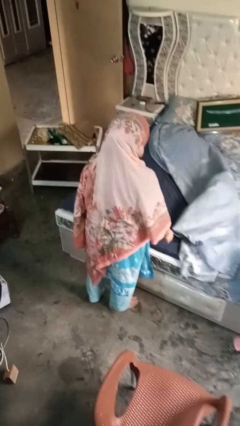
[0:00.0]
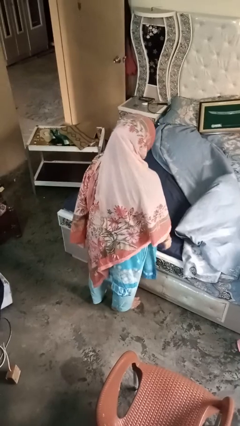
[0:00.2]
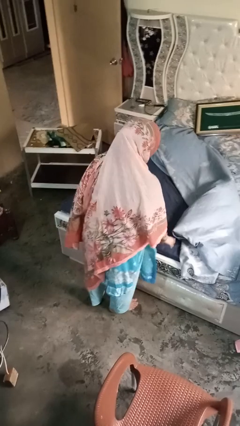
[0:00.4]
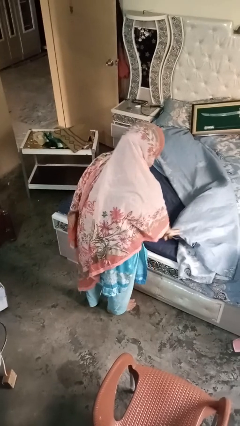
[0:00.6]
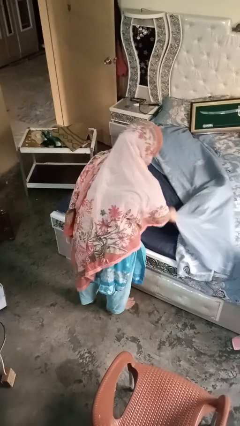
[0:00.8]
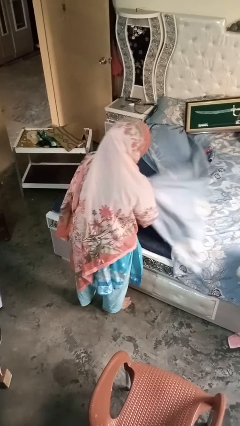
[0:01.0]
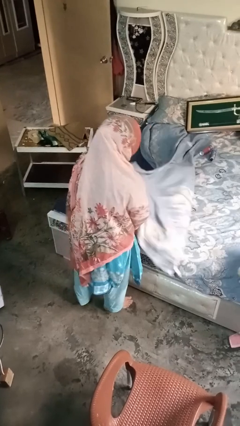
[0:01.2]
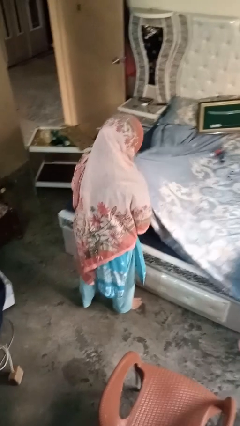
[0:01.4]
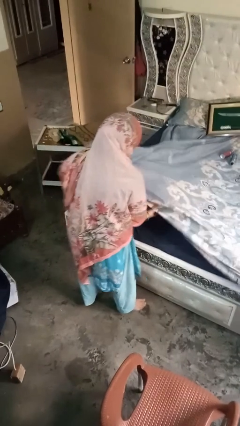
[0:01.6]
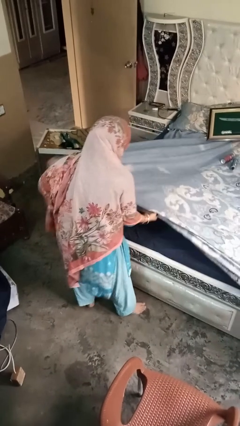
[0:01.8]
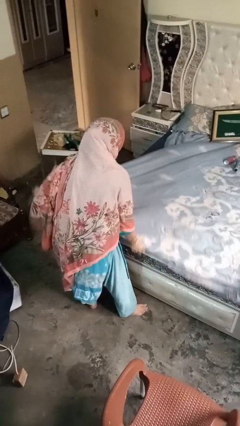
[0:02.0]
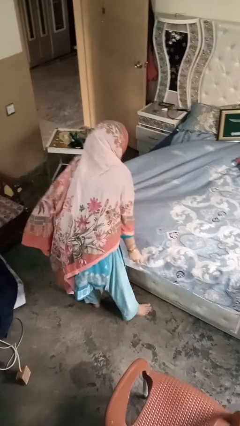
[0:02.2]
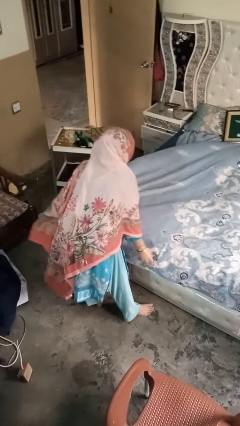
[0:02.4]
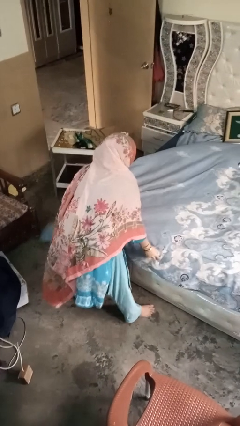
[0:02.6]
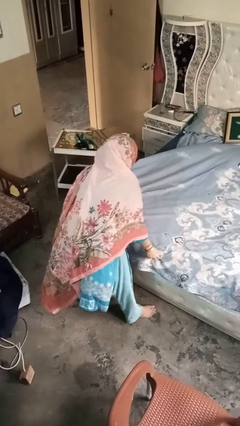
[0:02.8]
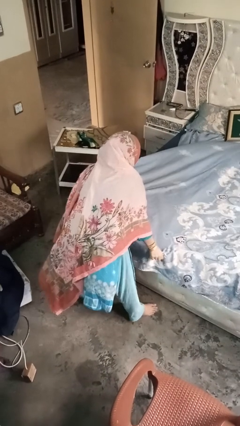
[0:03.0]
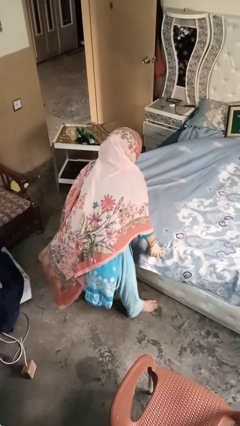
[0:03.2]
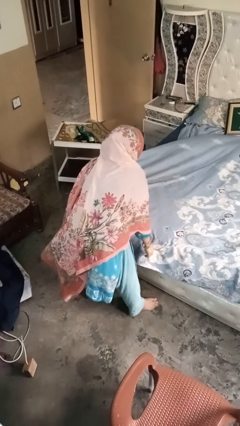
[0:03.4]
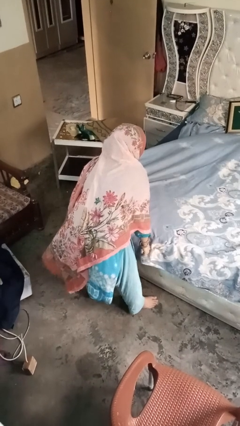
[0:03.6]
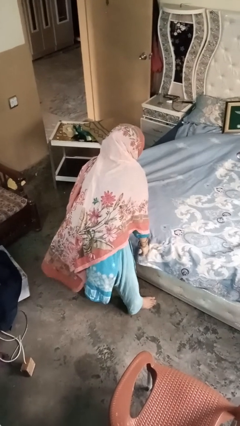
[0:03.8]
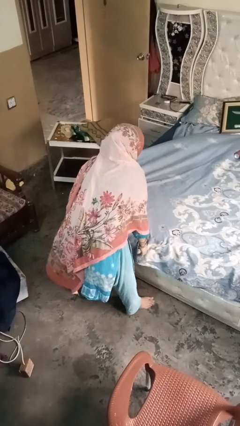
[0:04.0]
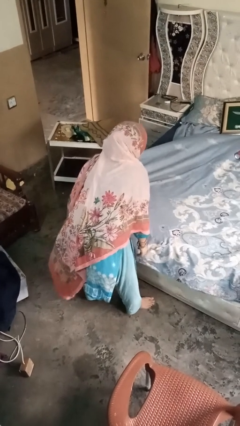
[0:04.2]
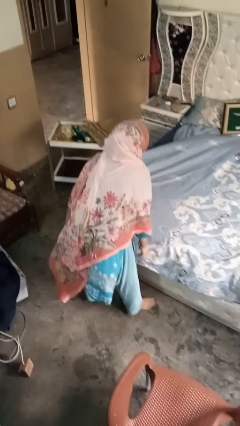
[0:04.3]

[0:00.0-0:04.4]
person makes bed

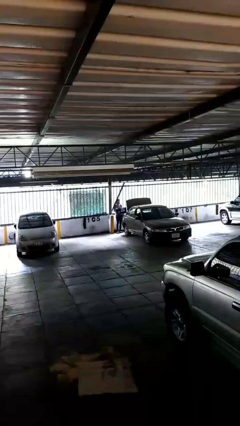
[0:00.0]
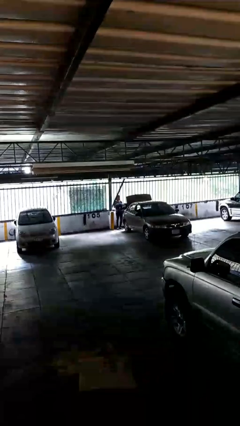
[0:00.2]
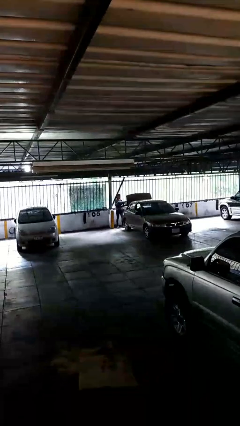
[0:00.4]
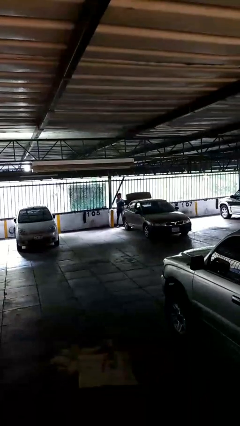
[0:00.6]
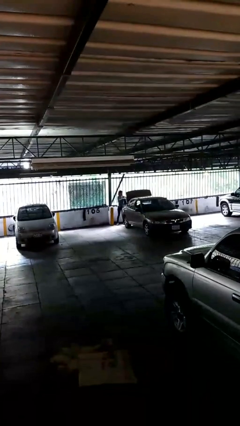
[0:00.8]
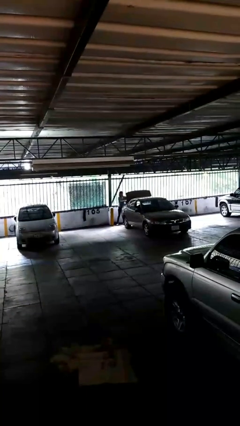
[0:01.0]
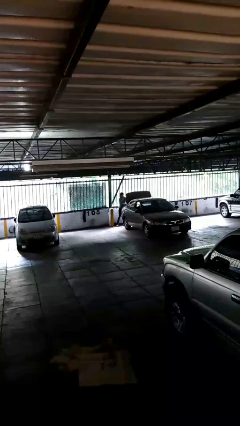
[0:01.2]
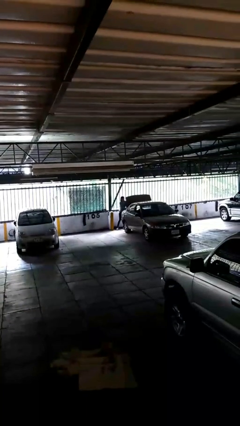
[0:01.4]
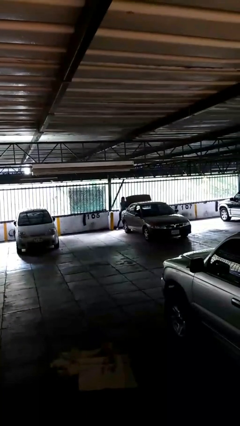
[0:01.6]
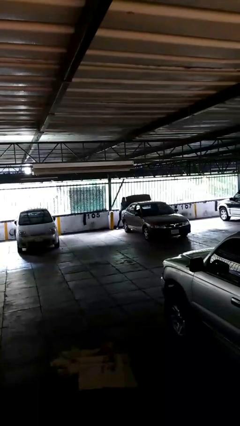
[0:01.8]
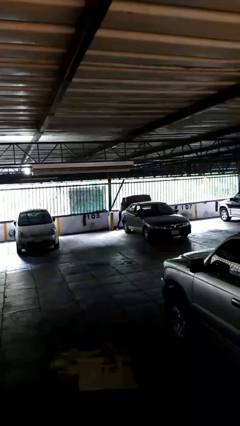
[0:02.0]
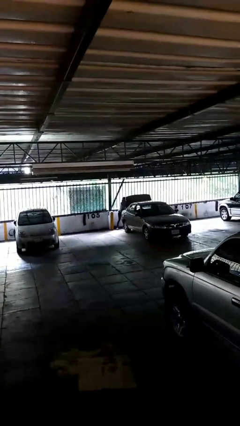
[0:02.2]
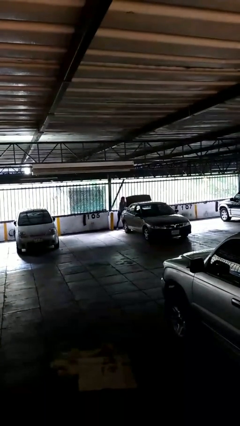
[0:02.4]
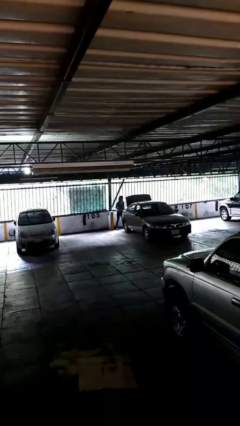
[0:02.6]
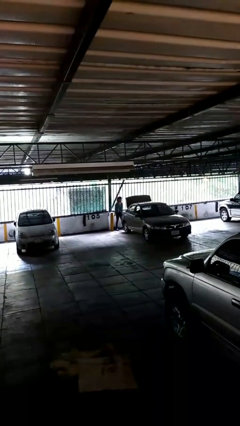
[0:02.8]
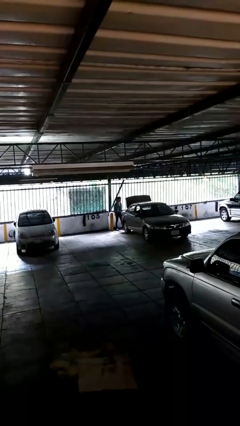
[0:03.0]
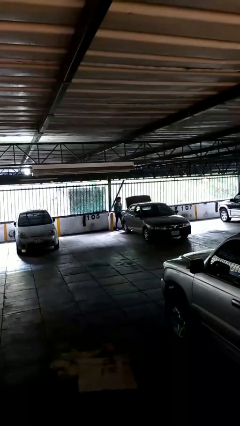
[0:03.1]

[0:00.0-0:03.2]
person loads car

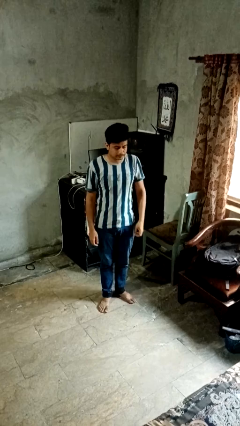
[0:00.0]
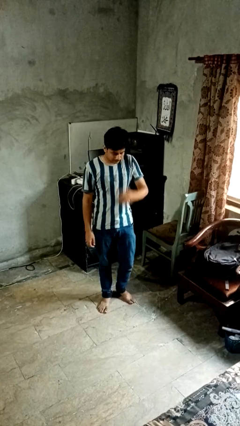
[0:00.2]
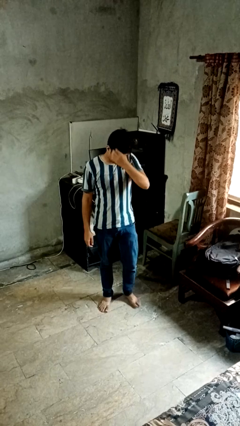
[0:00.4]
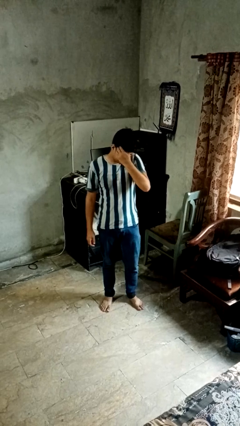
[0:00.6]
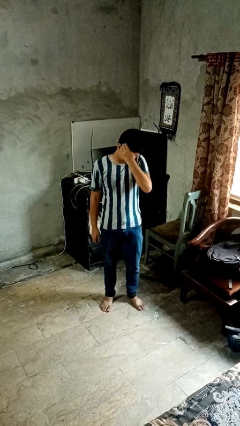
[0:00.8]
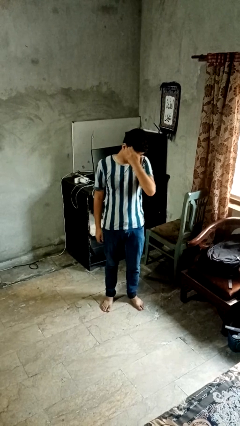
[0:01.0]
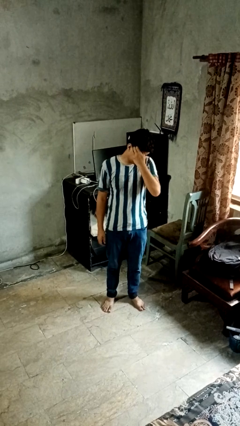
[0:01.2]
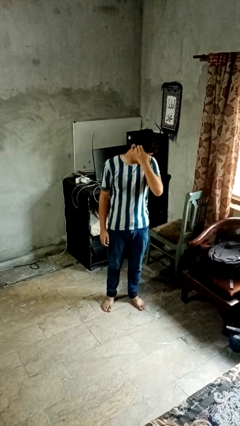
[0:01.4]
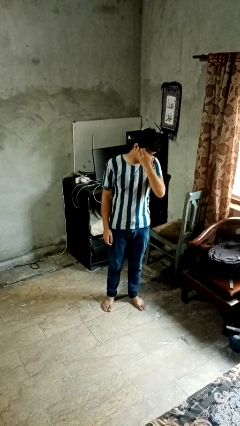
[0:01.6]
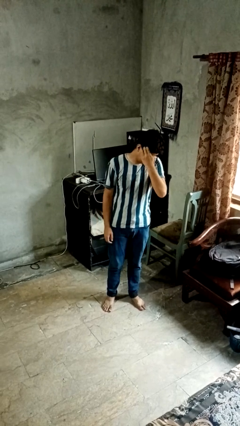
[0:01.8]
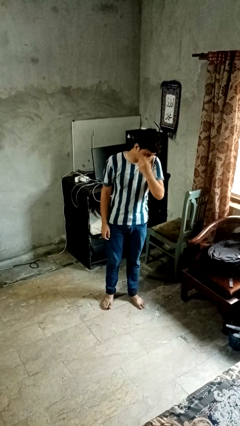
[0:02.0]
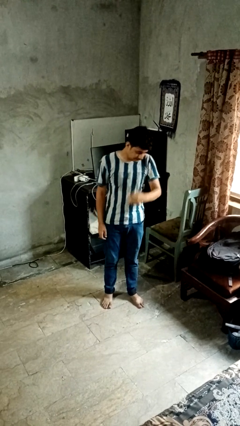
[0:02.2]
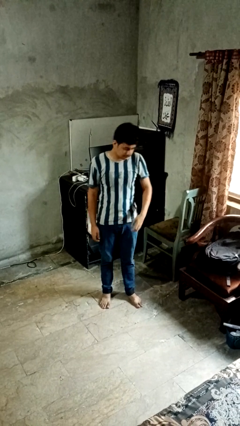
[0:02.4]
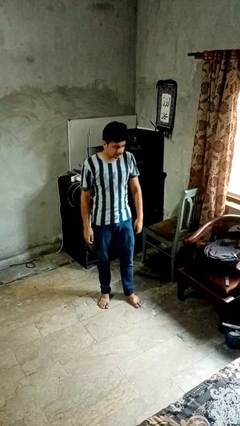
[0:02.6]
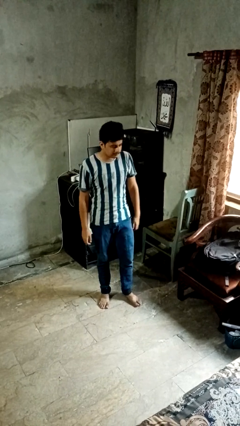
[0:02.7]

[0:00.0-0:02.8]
person scratches face

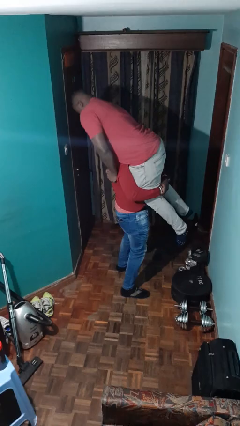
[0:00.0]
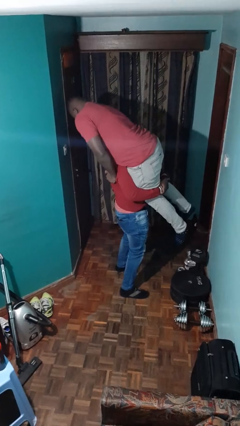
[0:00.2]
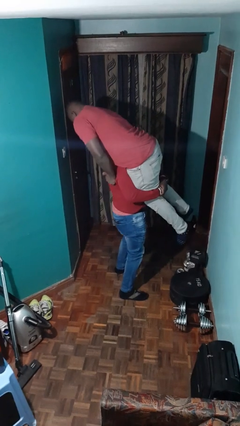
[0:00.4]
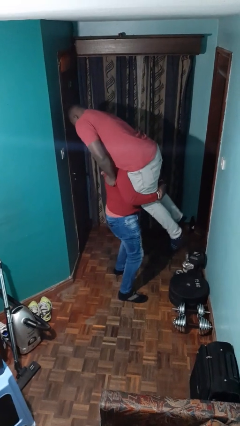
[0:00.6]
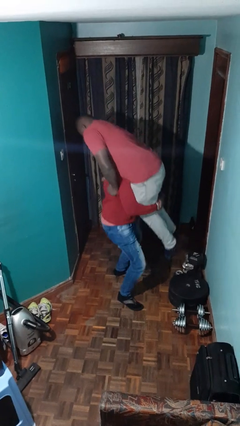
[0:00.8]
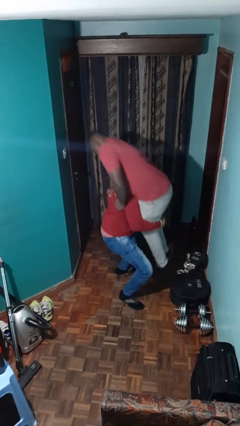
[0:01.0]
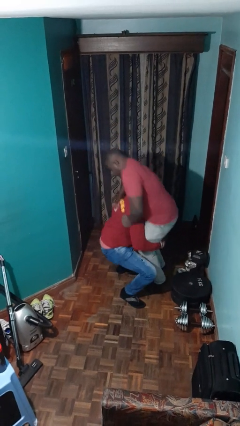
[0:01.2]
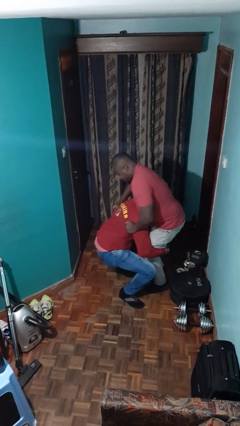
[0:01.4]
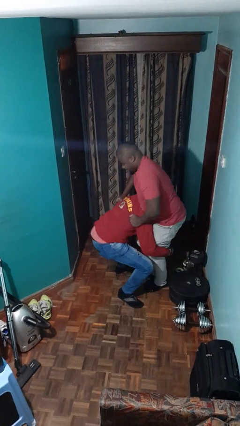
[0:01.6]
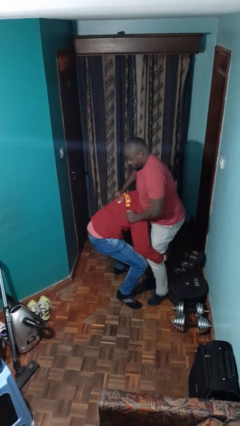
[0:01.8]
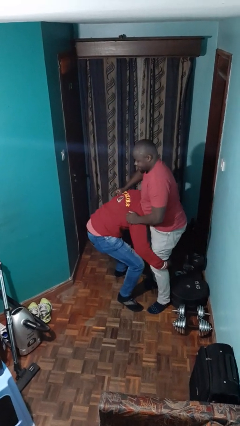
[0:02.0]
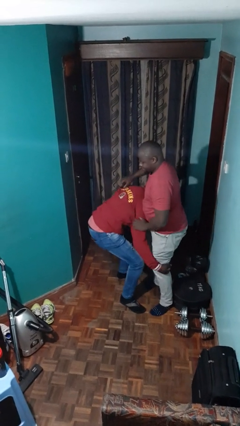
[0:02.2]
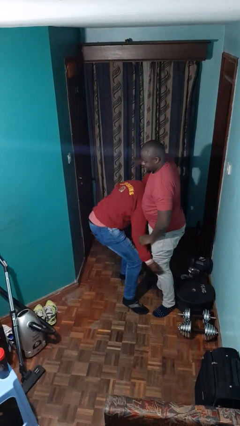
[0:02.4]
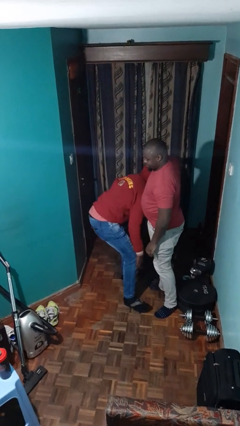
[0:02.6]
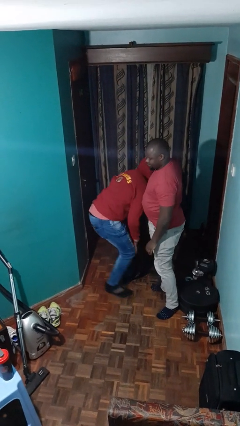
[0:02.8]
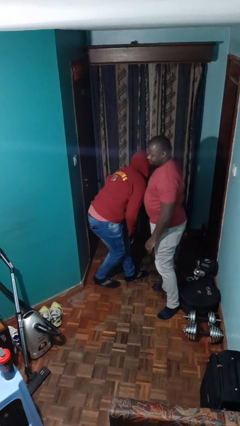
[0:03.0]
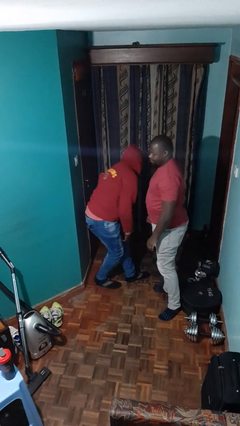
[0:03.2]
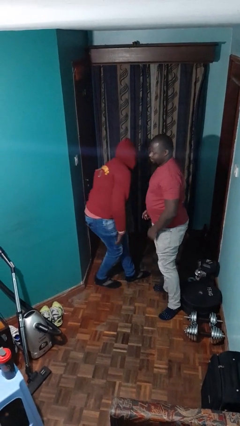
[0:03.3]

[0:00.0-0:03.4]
person puts down person

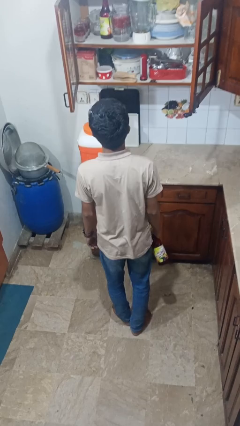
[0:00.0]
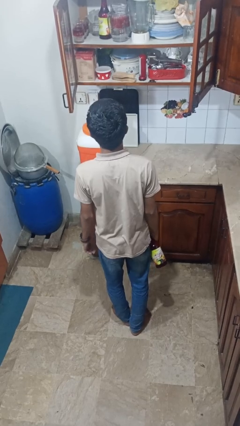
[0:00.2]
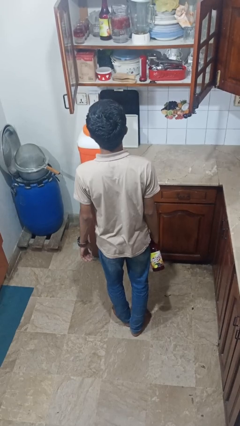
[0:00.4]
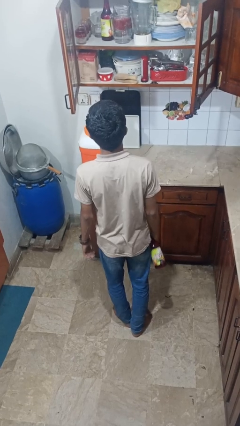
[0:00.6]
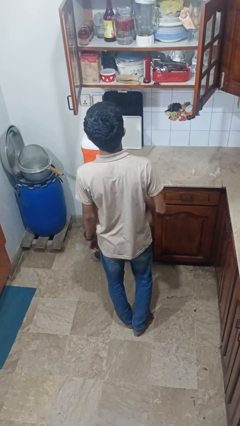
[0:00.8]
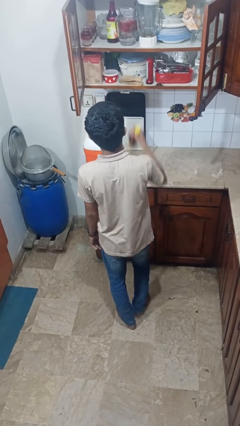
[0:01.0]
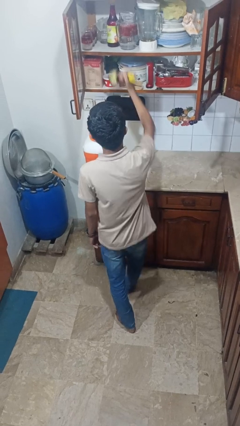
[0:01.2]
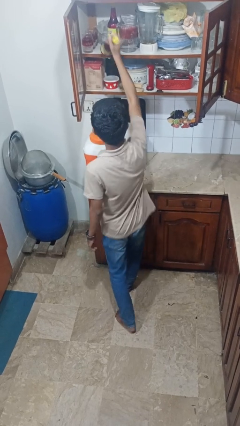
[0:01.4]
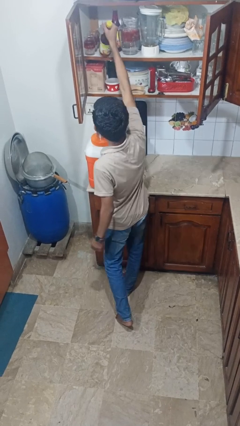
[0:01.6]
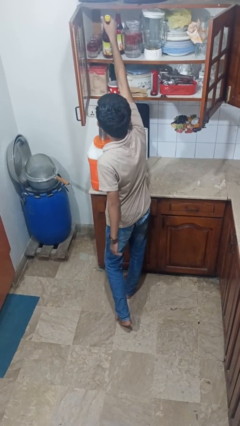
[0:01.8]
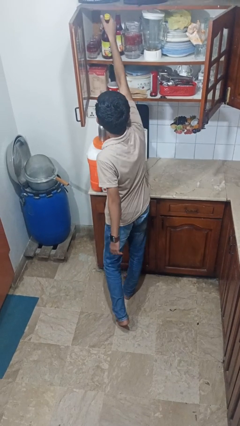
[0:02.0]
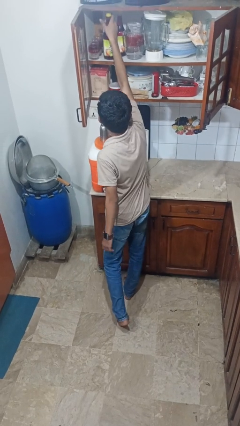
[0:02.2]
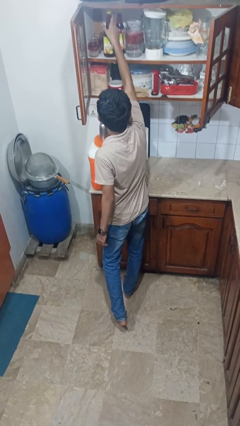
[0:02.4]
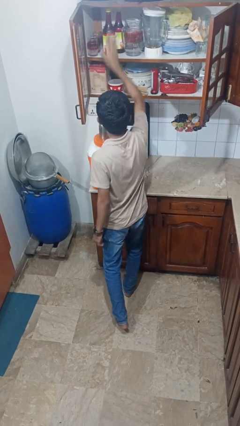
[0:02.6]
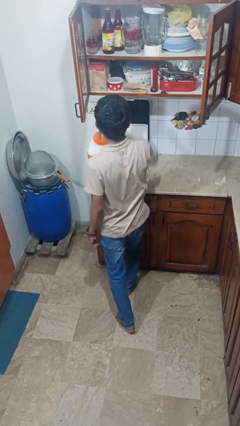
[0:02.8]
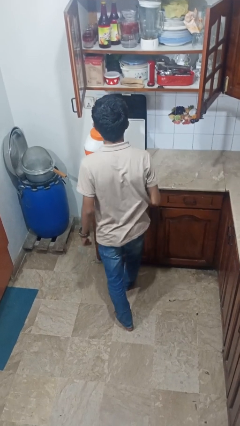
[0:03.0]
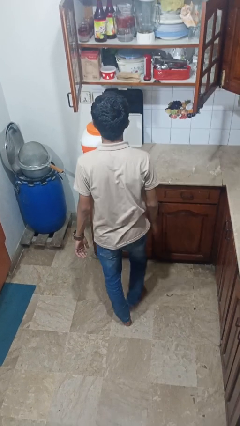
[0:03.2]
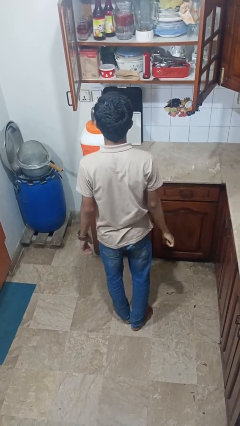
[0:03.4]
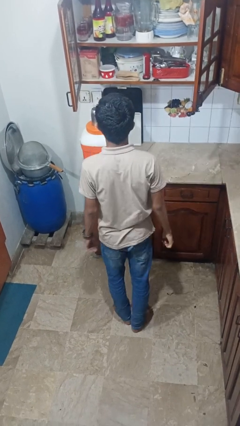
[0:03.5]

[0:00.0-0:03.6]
person puts down object into cabinet

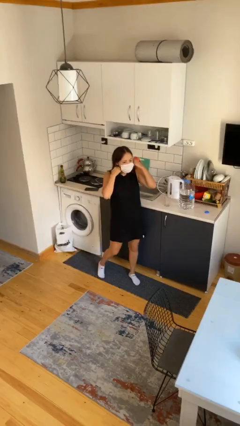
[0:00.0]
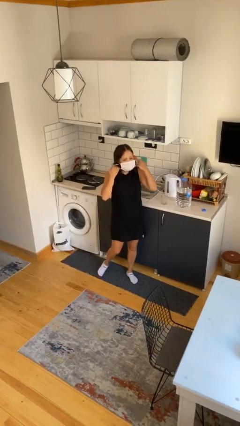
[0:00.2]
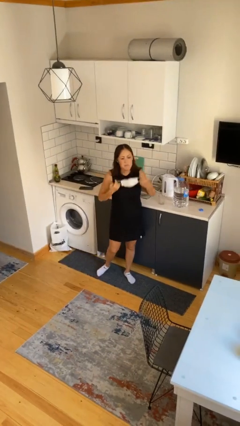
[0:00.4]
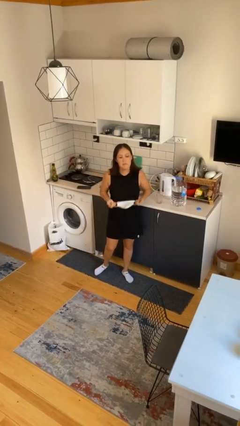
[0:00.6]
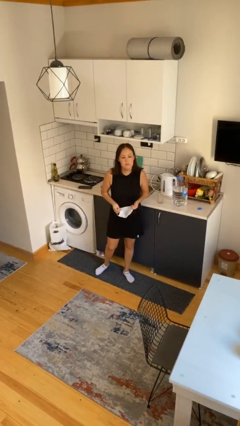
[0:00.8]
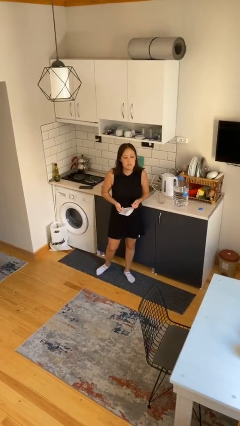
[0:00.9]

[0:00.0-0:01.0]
person takes off facemask
